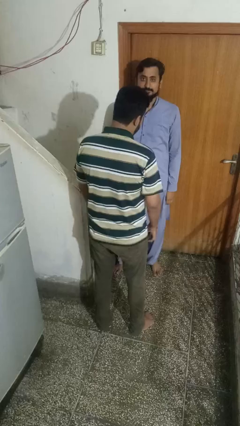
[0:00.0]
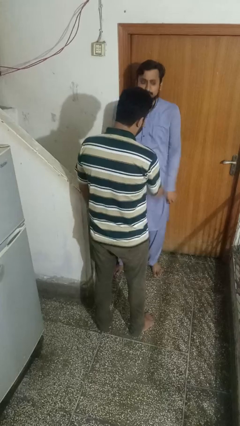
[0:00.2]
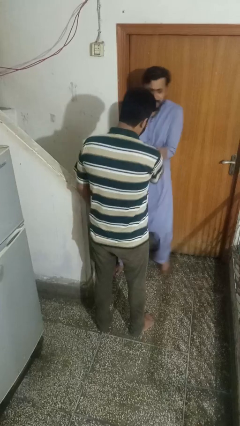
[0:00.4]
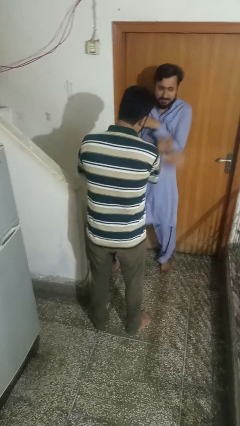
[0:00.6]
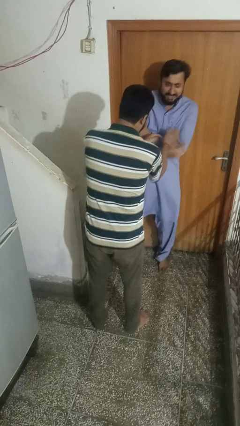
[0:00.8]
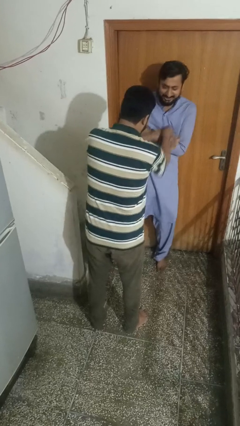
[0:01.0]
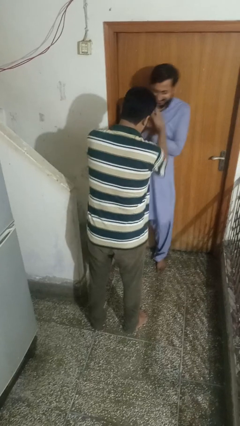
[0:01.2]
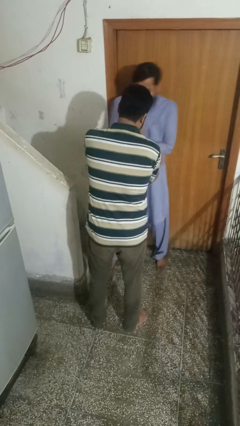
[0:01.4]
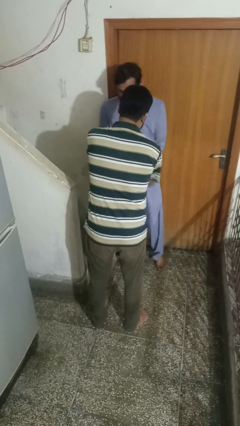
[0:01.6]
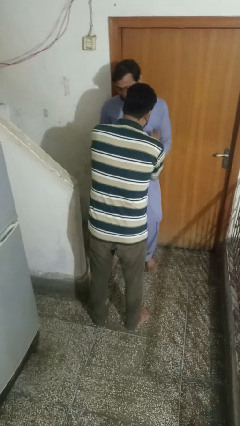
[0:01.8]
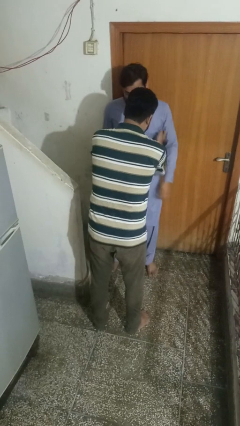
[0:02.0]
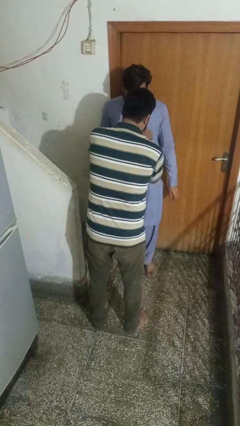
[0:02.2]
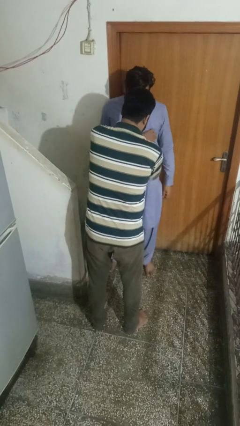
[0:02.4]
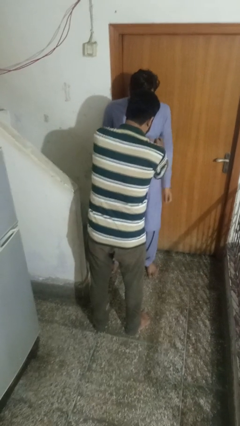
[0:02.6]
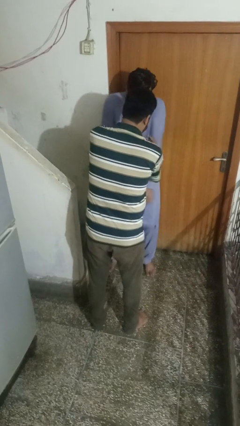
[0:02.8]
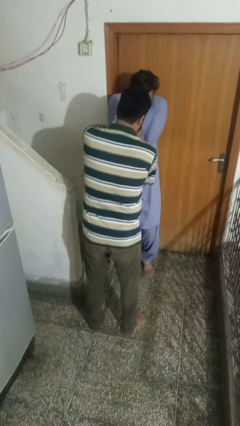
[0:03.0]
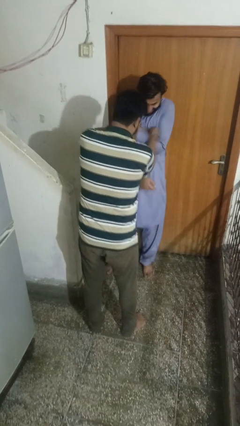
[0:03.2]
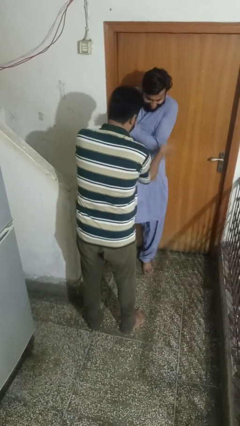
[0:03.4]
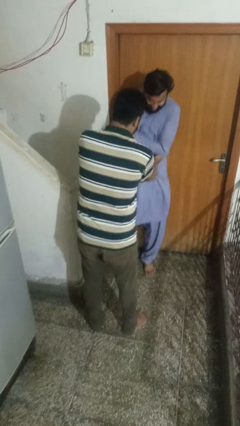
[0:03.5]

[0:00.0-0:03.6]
person tickles person

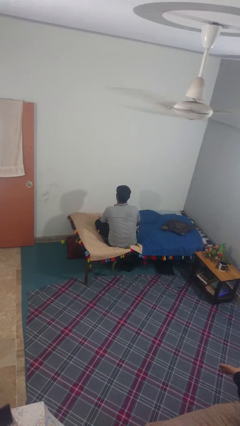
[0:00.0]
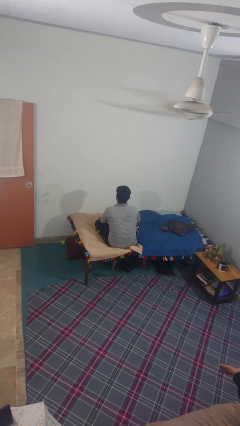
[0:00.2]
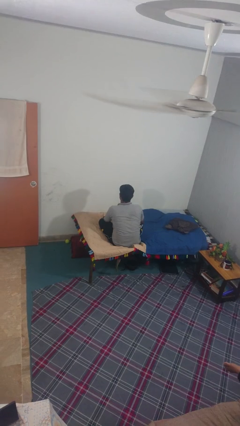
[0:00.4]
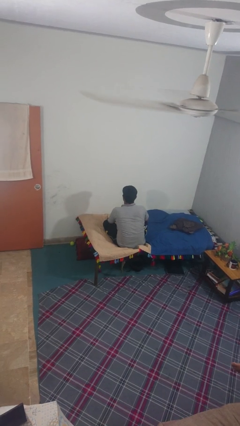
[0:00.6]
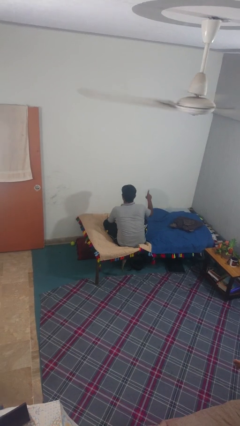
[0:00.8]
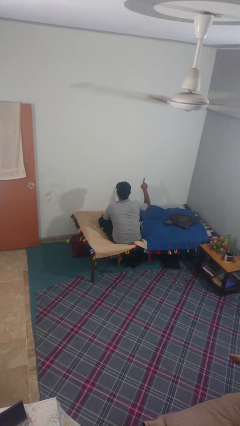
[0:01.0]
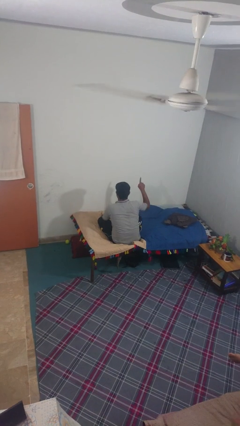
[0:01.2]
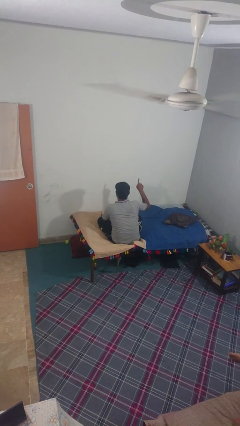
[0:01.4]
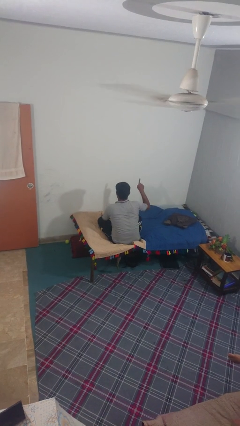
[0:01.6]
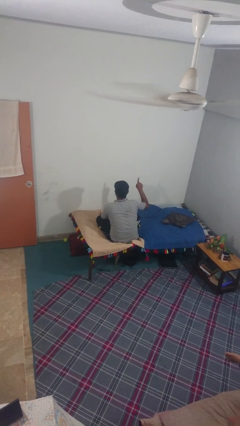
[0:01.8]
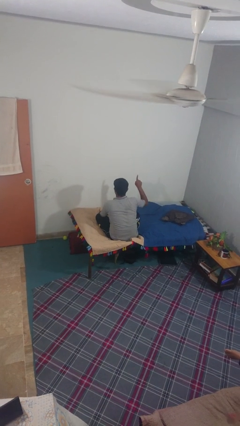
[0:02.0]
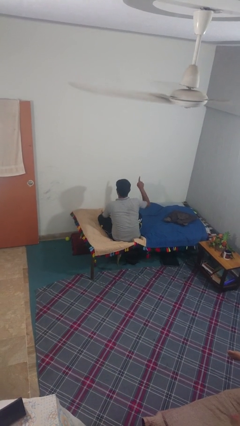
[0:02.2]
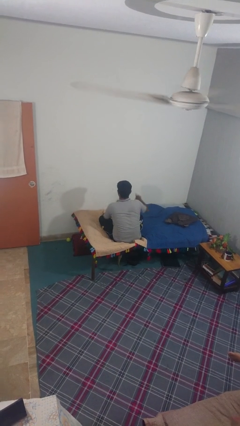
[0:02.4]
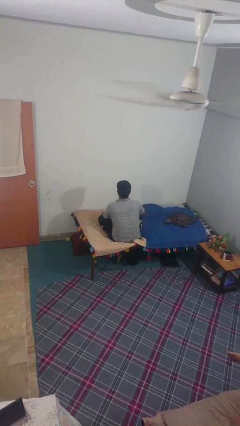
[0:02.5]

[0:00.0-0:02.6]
person gestures number one

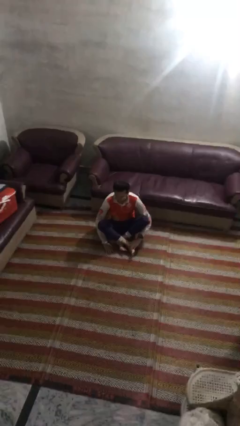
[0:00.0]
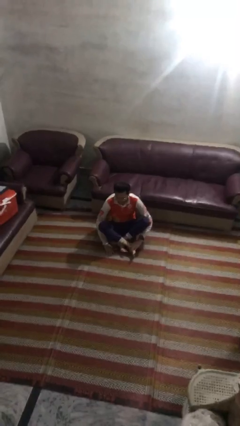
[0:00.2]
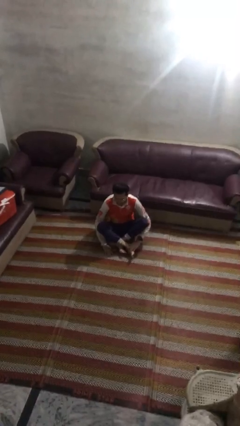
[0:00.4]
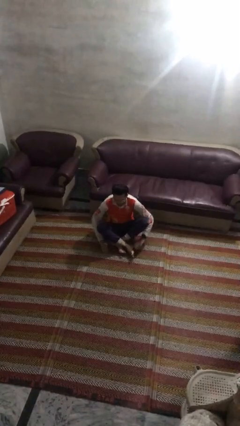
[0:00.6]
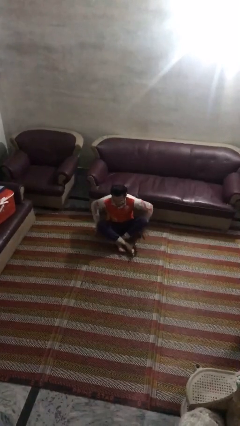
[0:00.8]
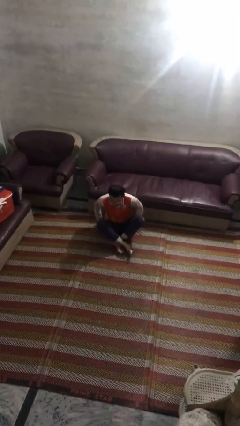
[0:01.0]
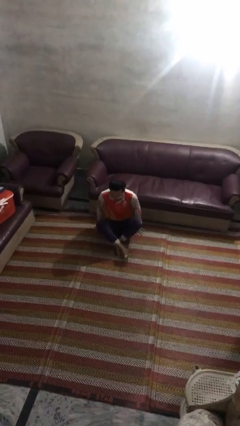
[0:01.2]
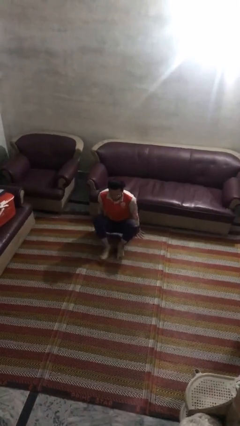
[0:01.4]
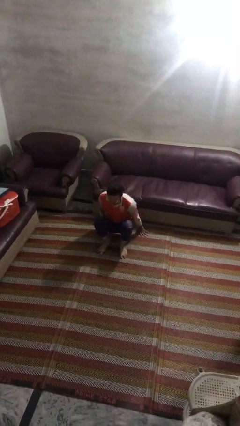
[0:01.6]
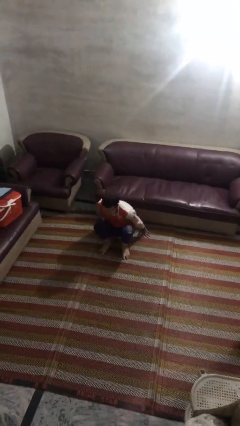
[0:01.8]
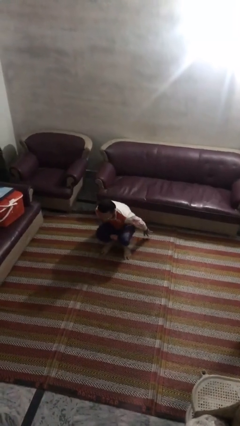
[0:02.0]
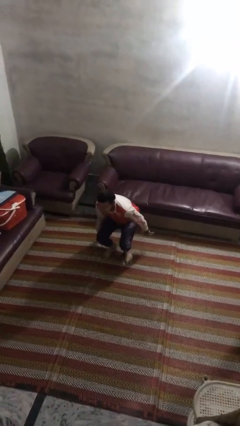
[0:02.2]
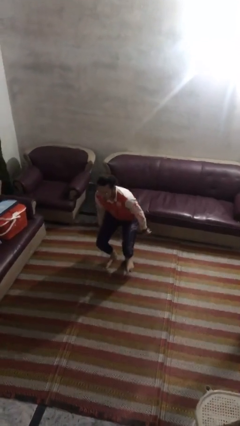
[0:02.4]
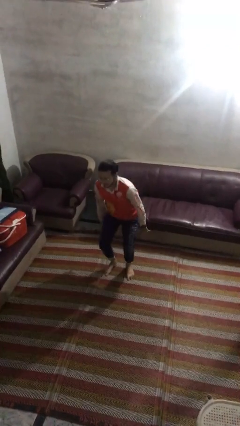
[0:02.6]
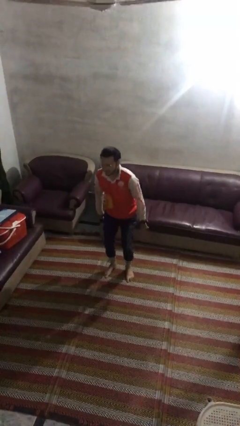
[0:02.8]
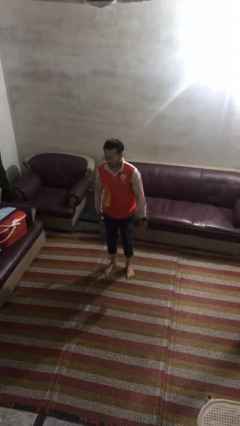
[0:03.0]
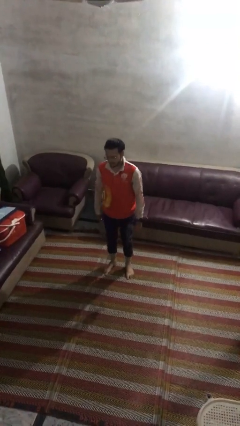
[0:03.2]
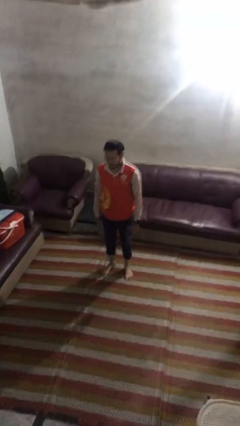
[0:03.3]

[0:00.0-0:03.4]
person stands up from floor

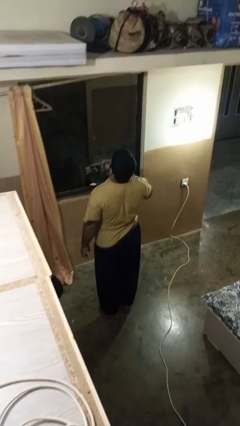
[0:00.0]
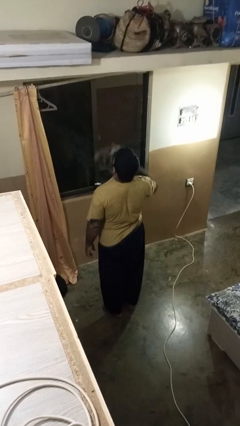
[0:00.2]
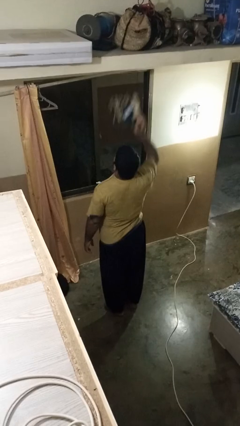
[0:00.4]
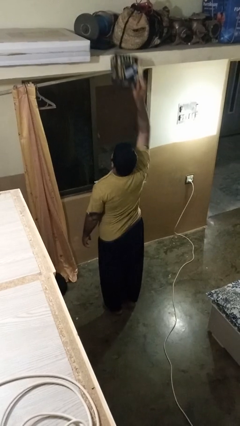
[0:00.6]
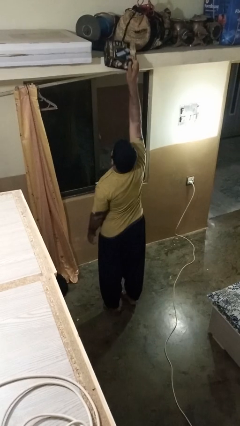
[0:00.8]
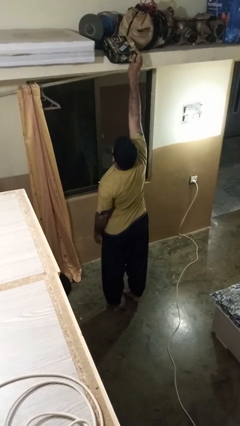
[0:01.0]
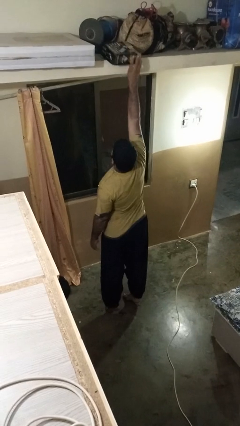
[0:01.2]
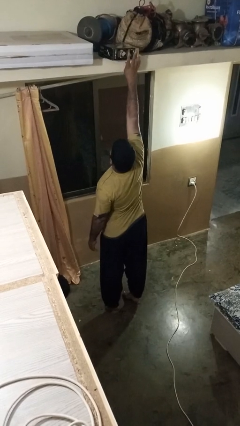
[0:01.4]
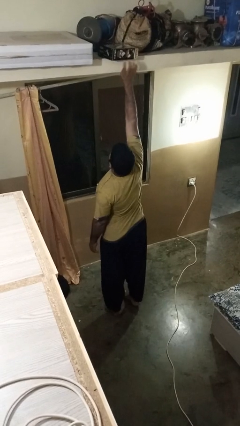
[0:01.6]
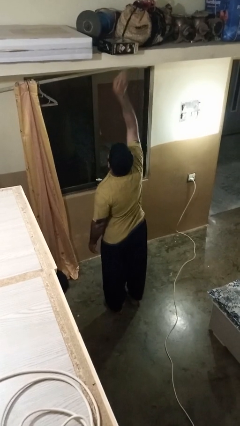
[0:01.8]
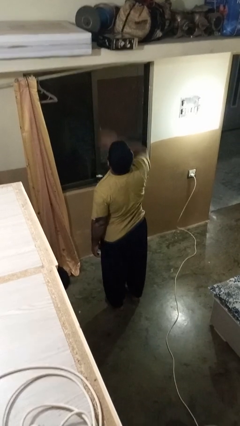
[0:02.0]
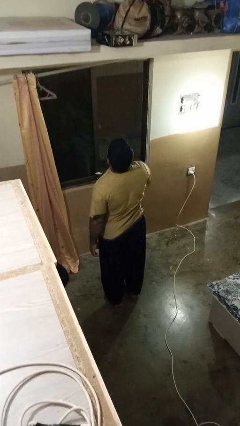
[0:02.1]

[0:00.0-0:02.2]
person puts down object on shelf

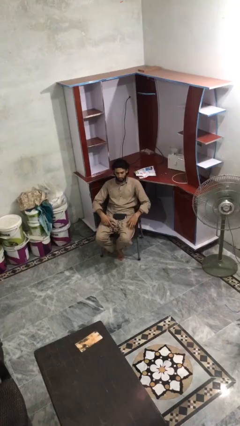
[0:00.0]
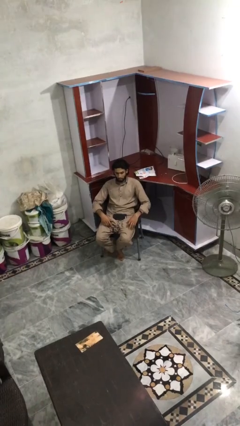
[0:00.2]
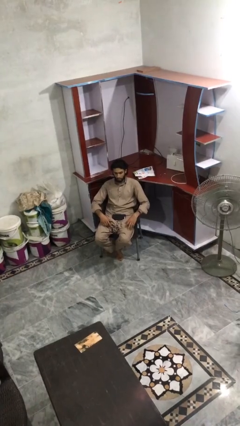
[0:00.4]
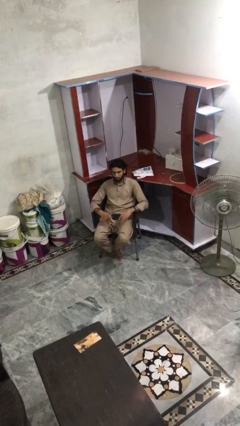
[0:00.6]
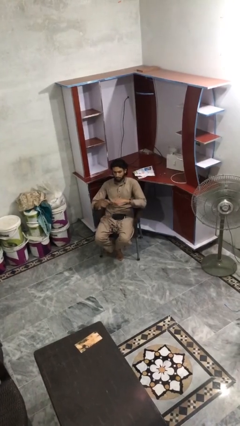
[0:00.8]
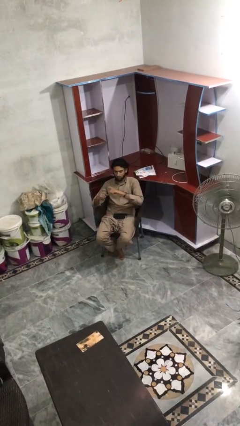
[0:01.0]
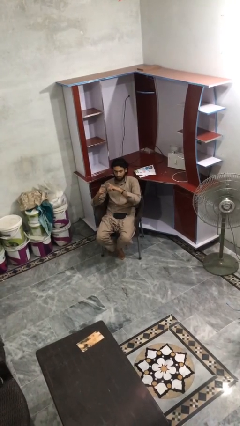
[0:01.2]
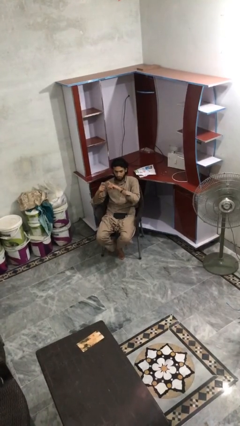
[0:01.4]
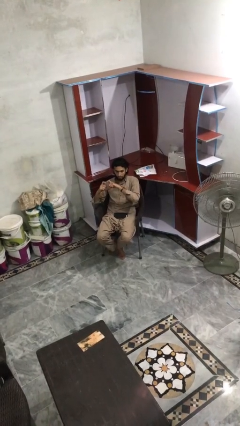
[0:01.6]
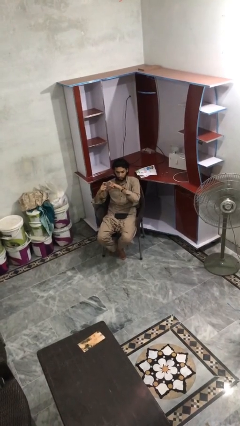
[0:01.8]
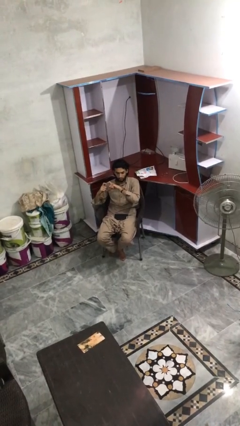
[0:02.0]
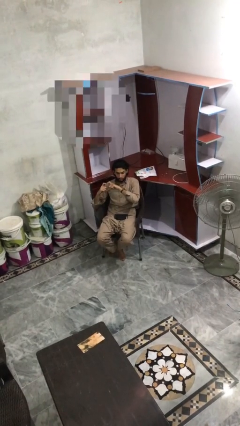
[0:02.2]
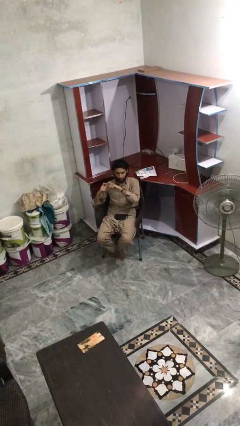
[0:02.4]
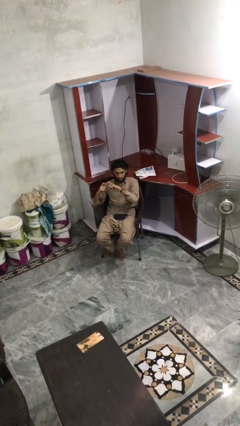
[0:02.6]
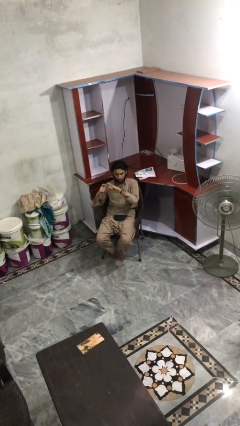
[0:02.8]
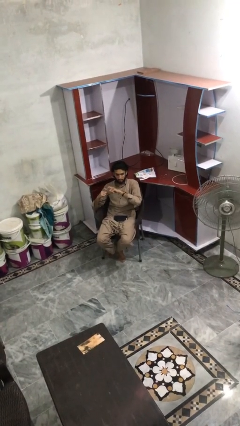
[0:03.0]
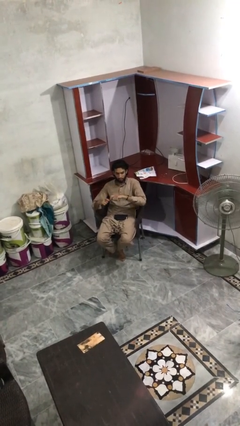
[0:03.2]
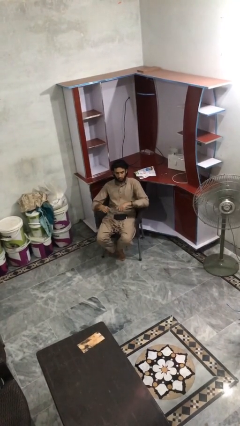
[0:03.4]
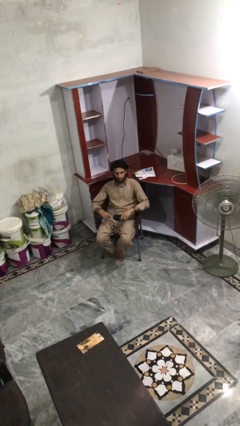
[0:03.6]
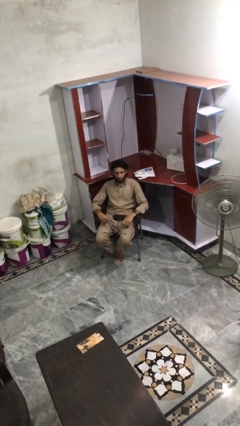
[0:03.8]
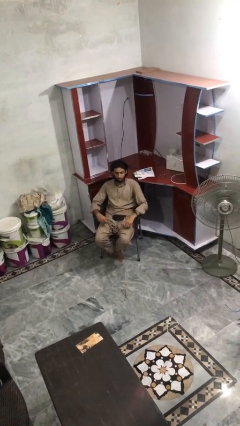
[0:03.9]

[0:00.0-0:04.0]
person gestures heart

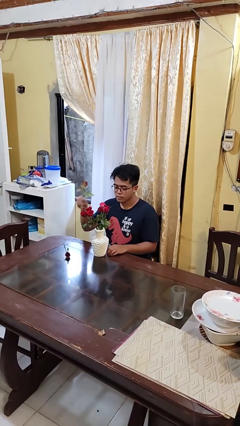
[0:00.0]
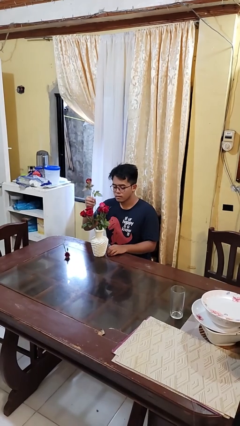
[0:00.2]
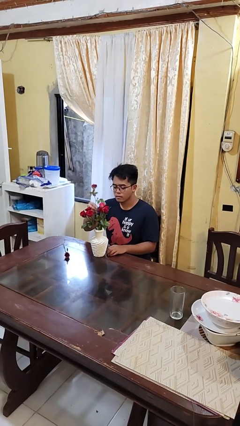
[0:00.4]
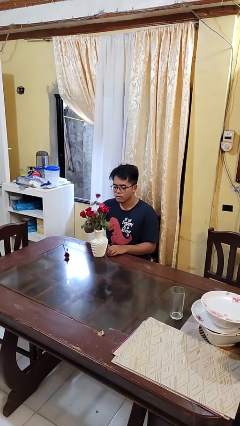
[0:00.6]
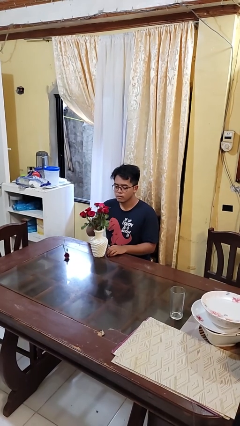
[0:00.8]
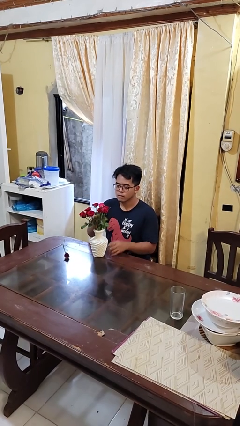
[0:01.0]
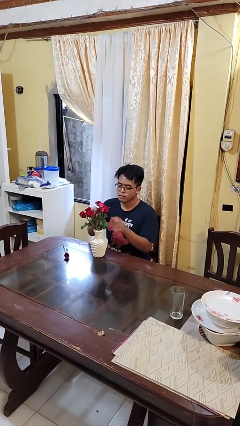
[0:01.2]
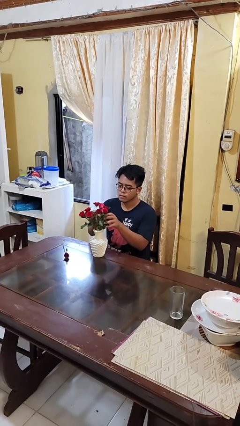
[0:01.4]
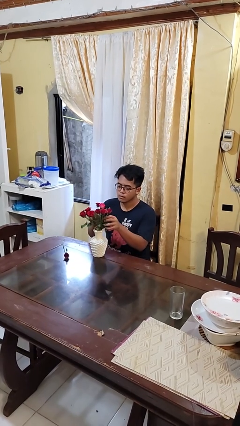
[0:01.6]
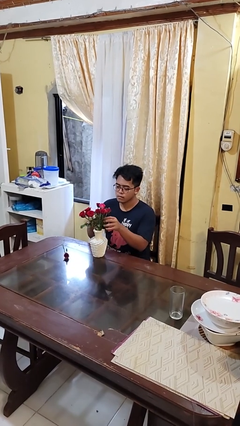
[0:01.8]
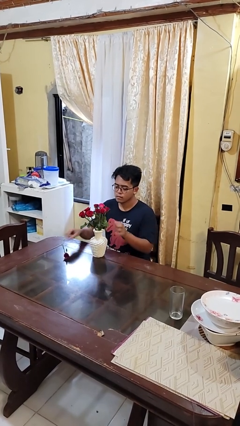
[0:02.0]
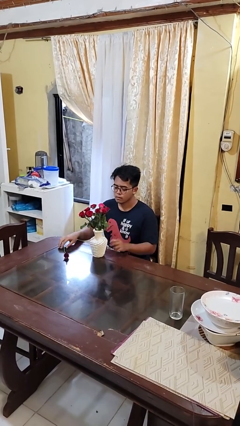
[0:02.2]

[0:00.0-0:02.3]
person arranges flowers in vase
